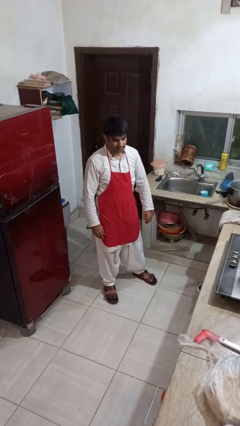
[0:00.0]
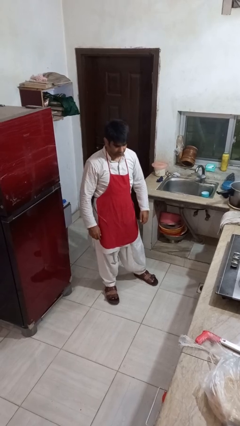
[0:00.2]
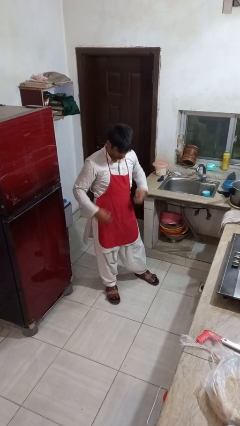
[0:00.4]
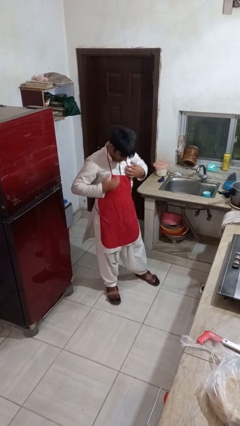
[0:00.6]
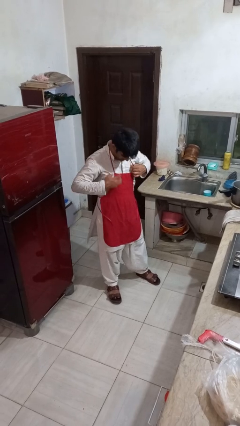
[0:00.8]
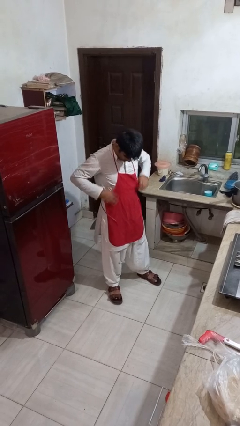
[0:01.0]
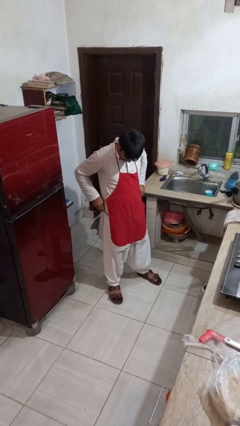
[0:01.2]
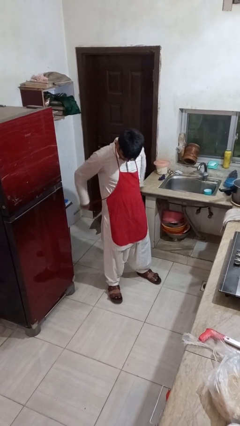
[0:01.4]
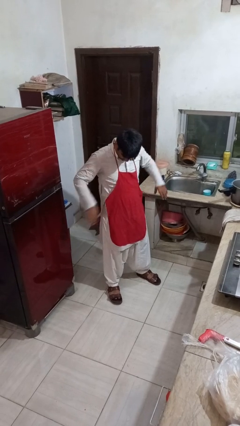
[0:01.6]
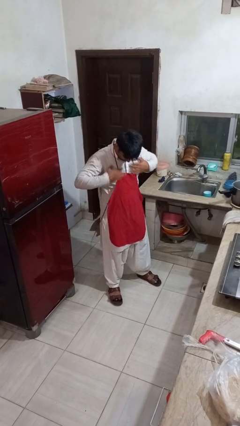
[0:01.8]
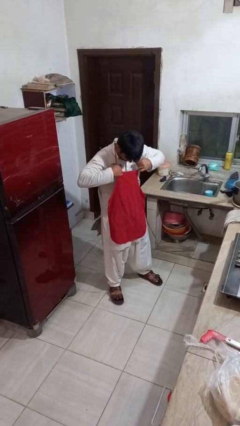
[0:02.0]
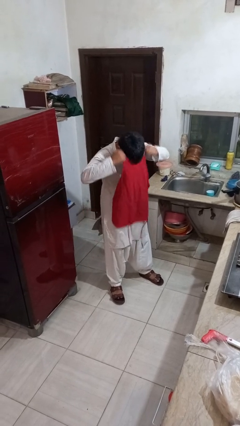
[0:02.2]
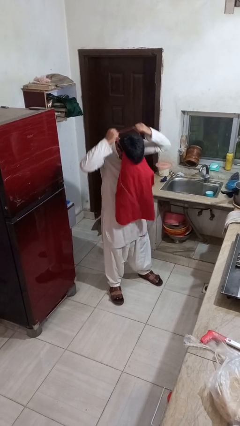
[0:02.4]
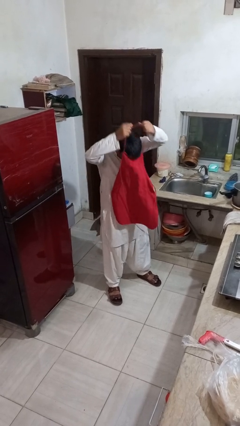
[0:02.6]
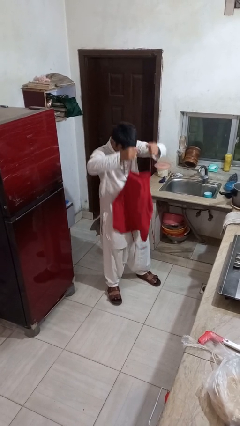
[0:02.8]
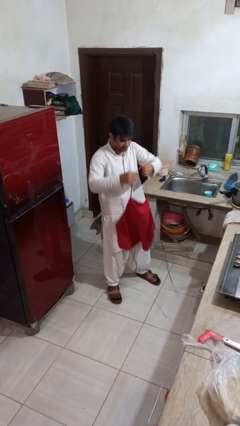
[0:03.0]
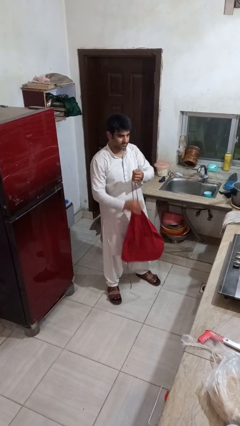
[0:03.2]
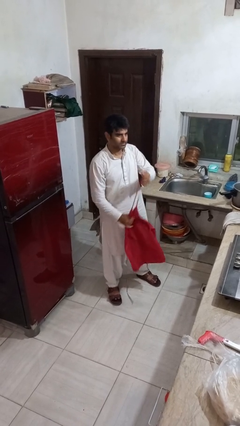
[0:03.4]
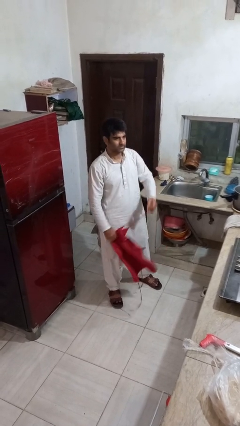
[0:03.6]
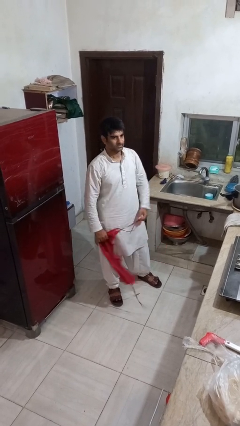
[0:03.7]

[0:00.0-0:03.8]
person takes off apron

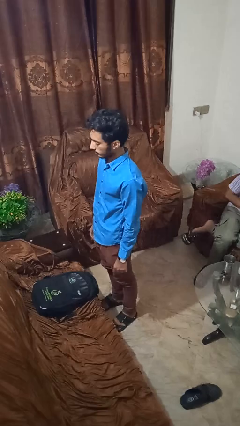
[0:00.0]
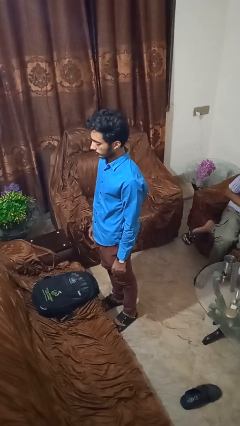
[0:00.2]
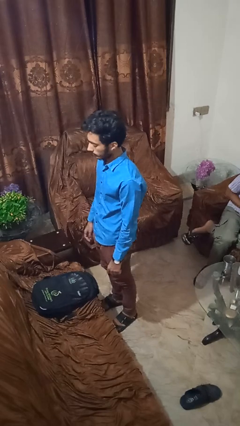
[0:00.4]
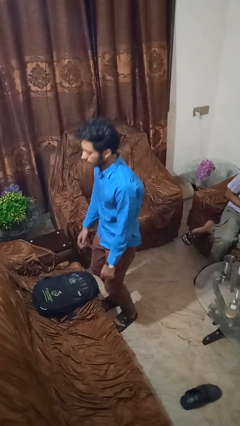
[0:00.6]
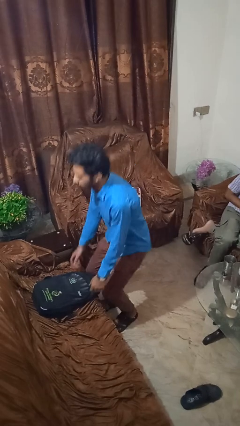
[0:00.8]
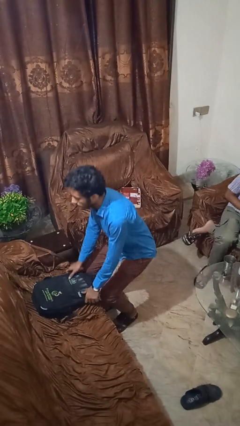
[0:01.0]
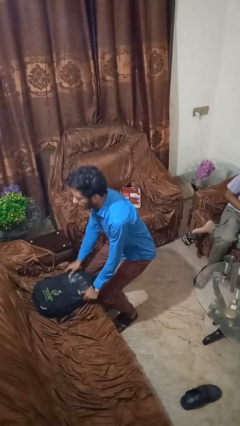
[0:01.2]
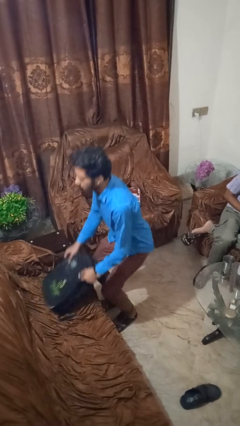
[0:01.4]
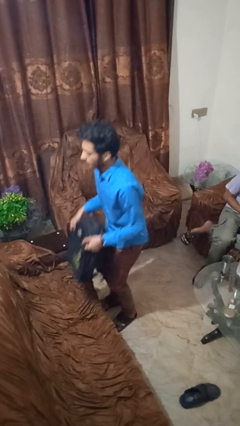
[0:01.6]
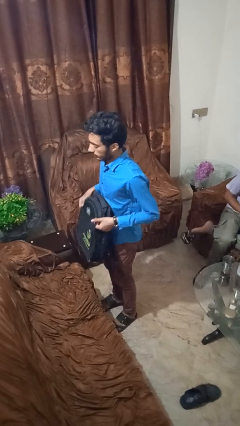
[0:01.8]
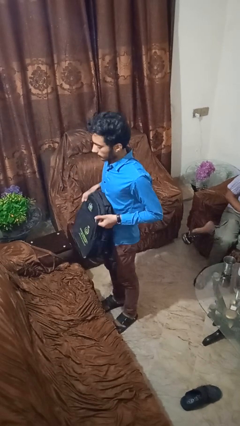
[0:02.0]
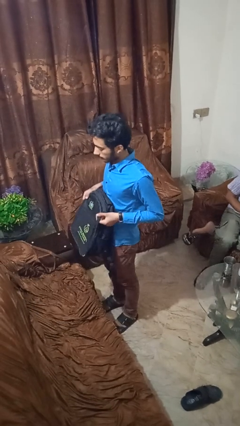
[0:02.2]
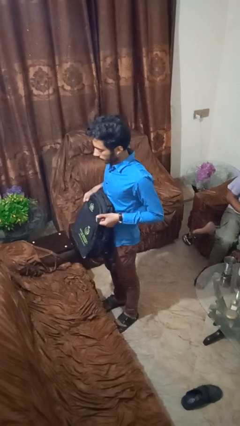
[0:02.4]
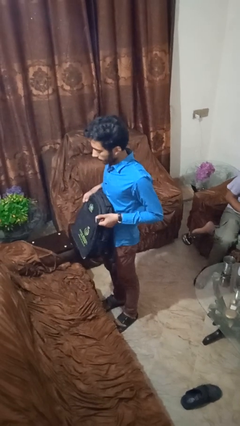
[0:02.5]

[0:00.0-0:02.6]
person picks up object from couch

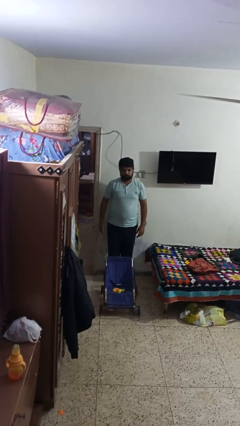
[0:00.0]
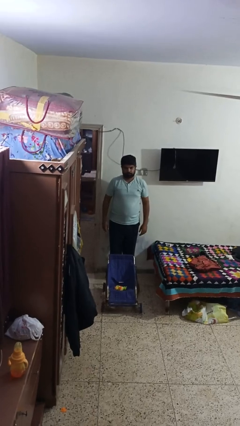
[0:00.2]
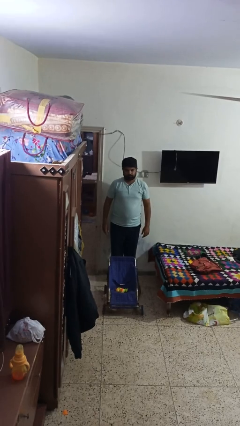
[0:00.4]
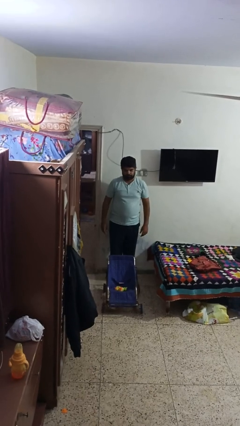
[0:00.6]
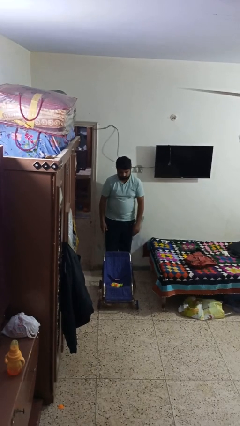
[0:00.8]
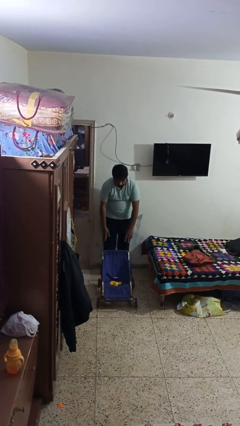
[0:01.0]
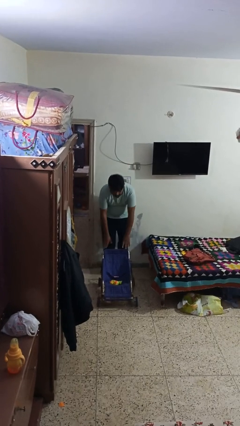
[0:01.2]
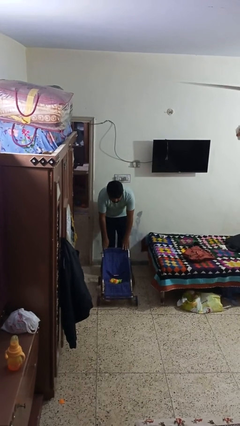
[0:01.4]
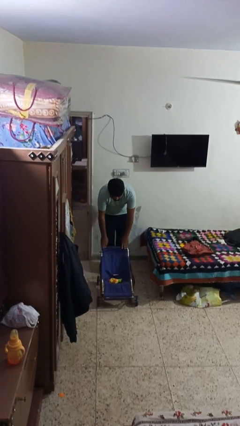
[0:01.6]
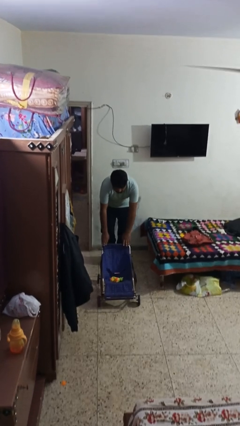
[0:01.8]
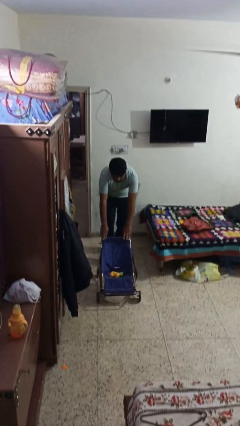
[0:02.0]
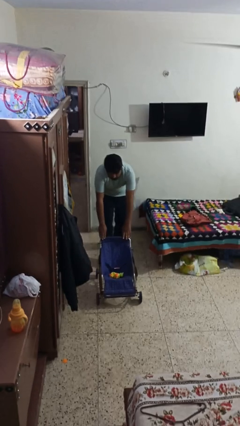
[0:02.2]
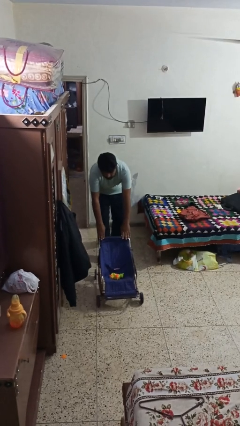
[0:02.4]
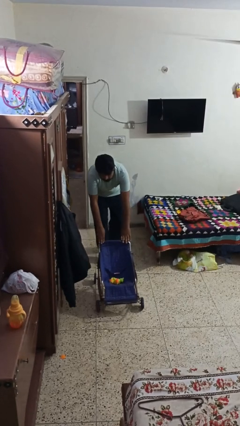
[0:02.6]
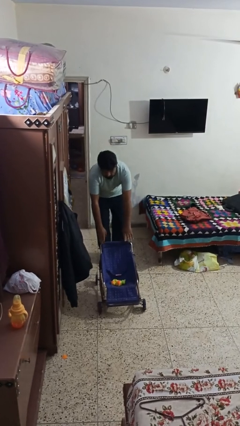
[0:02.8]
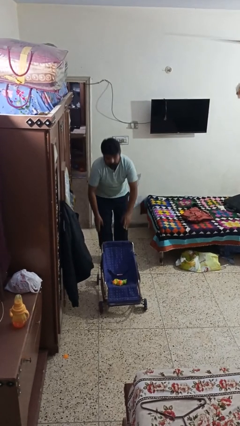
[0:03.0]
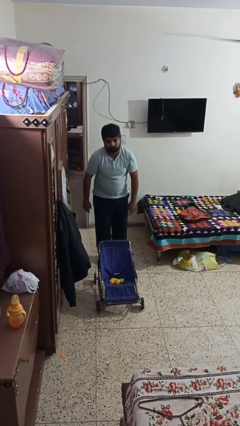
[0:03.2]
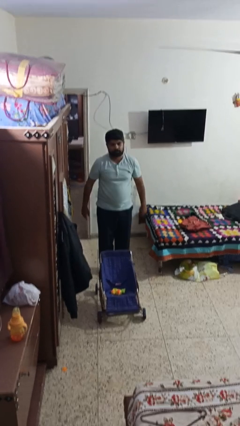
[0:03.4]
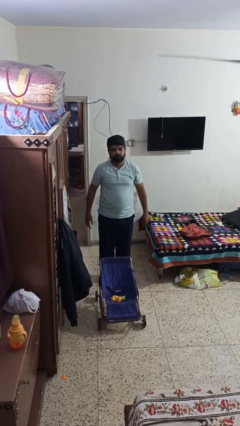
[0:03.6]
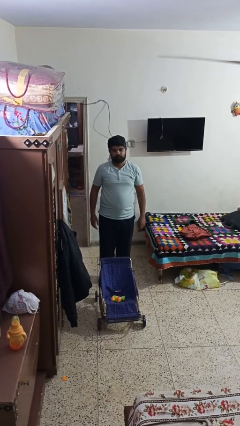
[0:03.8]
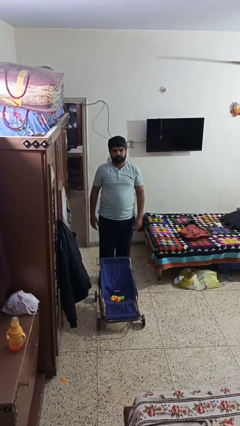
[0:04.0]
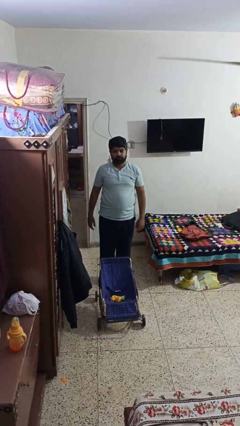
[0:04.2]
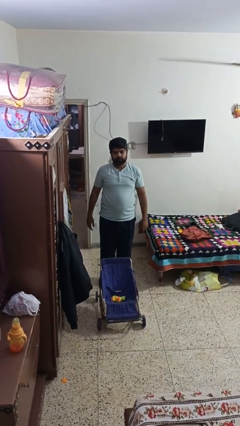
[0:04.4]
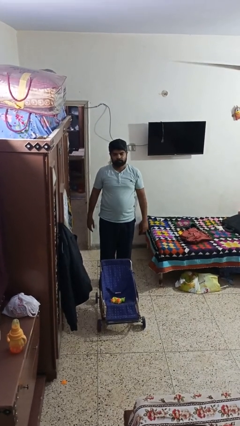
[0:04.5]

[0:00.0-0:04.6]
person pushes wheeled cart

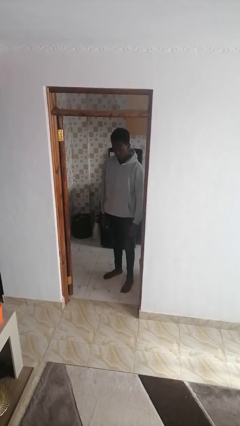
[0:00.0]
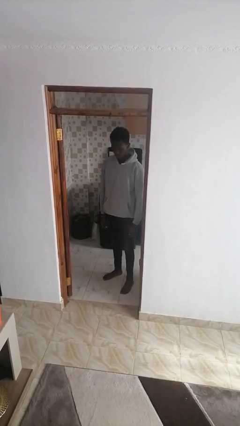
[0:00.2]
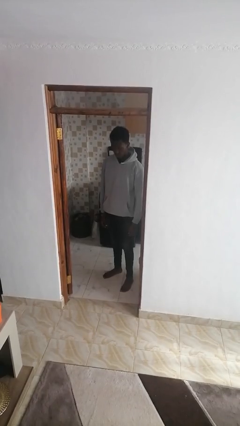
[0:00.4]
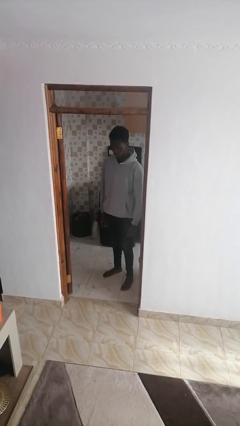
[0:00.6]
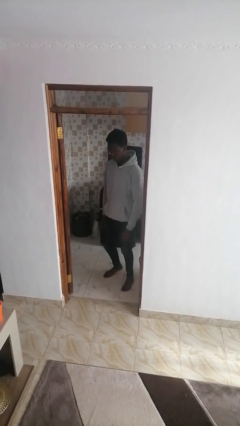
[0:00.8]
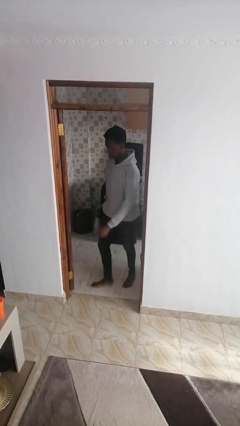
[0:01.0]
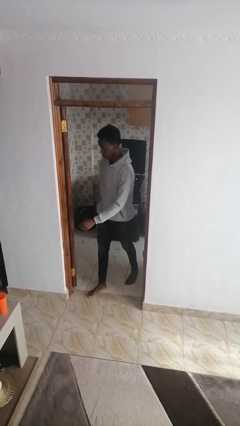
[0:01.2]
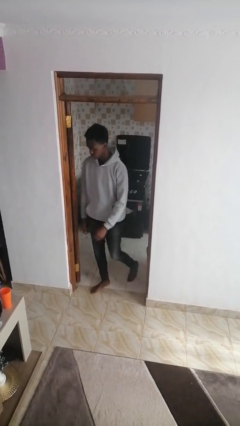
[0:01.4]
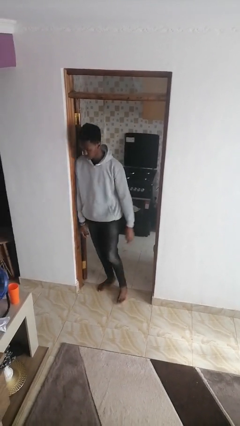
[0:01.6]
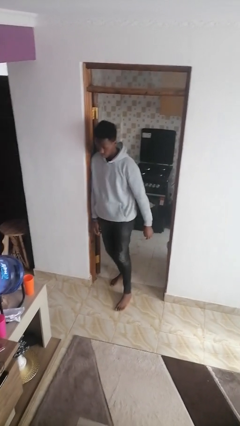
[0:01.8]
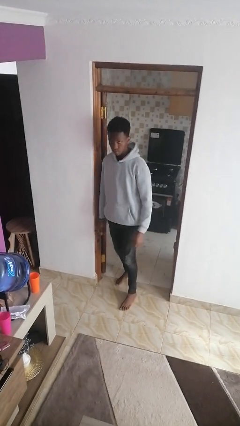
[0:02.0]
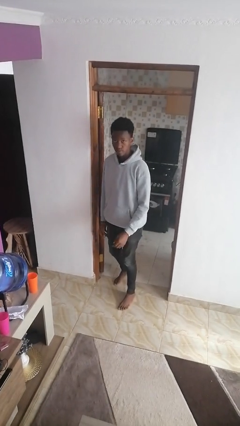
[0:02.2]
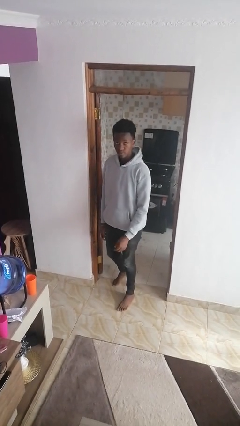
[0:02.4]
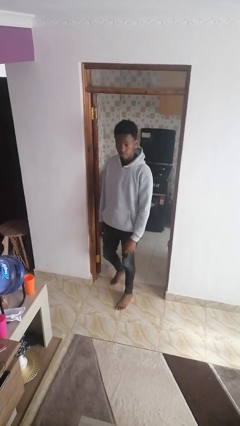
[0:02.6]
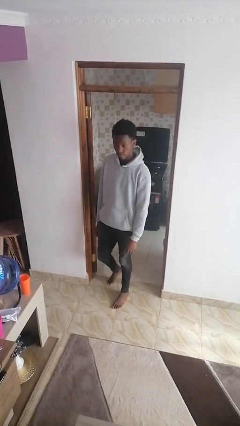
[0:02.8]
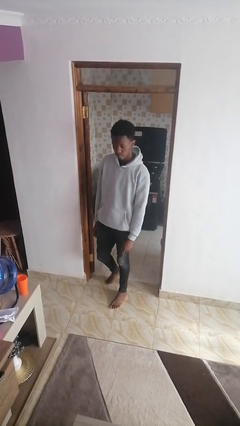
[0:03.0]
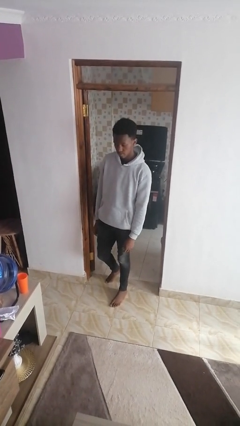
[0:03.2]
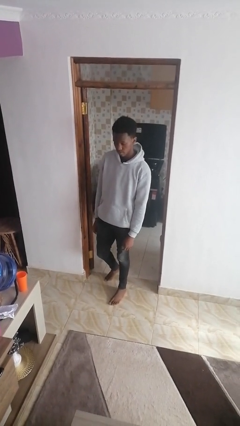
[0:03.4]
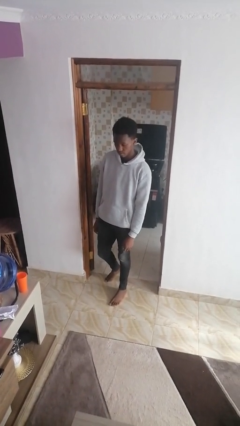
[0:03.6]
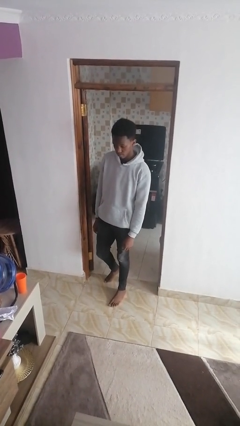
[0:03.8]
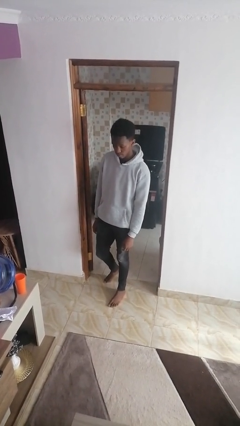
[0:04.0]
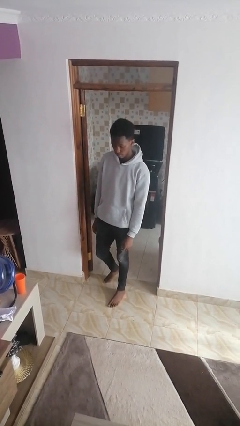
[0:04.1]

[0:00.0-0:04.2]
person bumps into wall

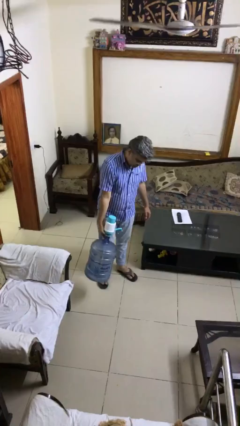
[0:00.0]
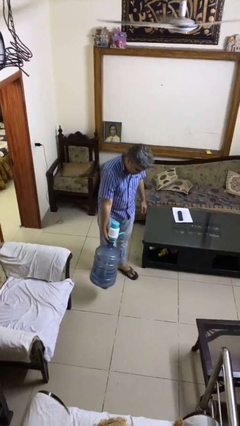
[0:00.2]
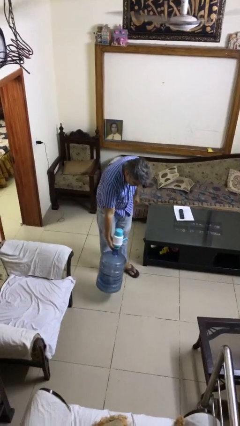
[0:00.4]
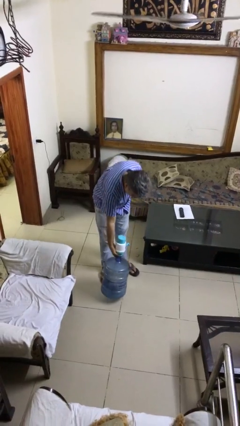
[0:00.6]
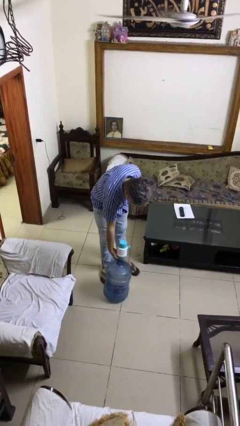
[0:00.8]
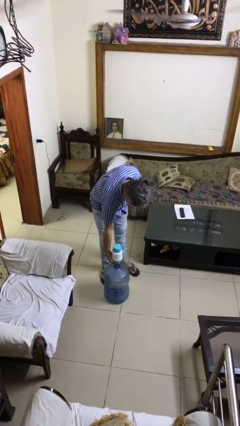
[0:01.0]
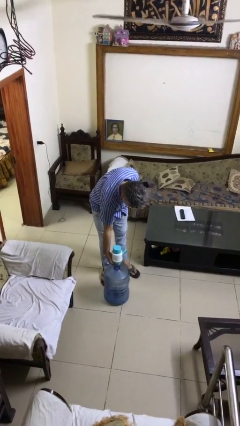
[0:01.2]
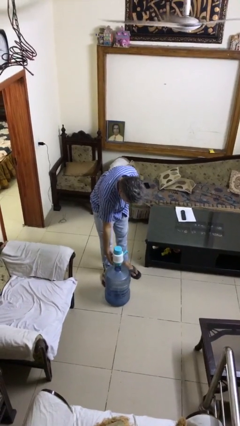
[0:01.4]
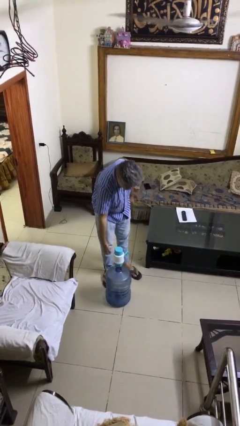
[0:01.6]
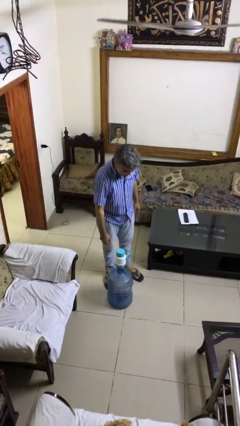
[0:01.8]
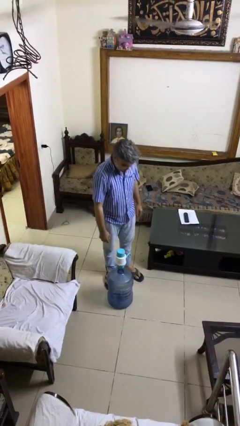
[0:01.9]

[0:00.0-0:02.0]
person puts down object on floor

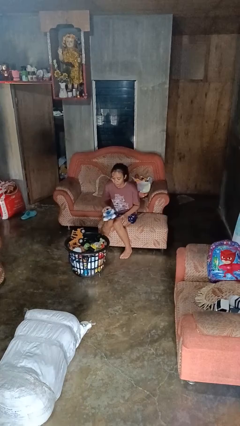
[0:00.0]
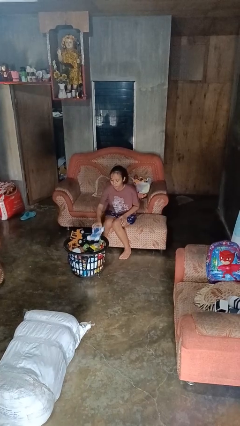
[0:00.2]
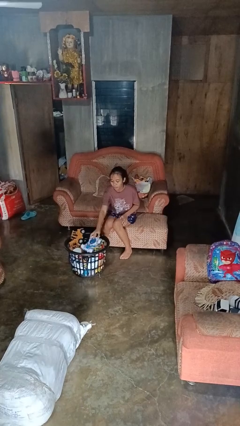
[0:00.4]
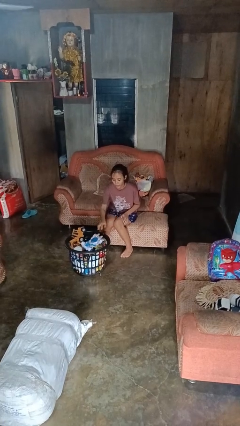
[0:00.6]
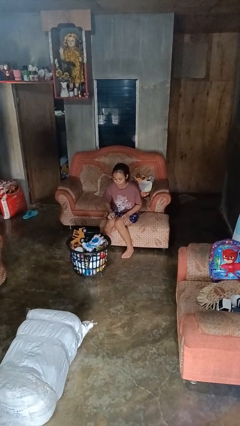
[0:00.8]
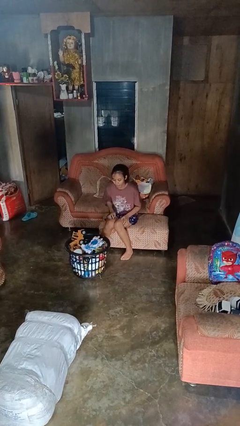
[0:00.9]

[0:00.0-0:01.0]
person puts object into basket
